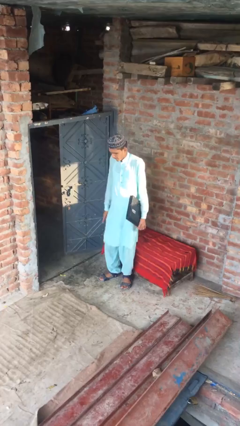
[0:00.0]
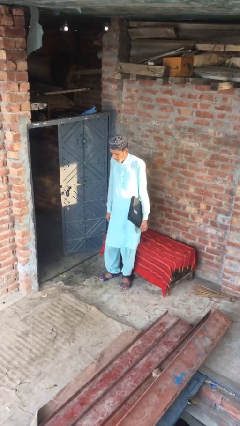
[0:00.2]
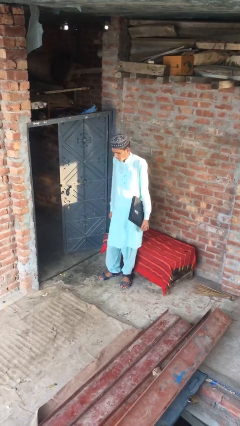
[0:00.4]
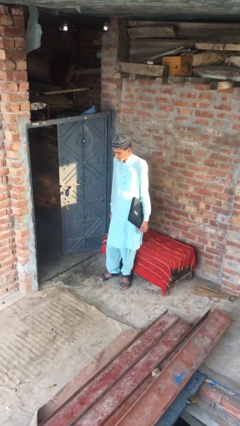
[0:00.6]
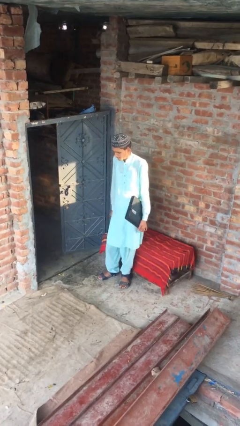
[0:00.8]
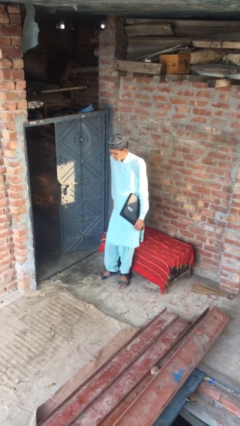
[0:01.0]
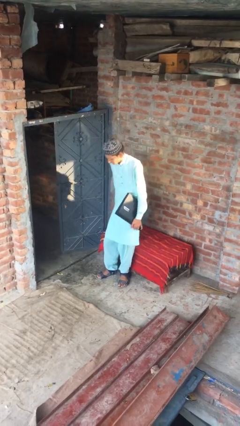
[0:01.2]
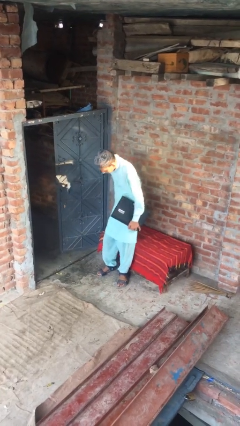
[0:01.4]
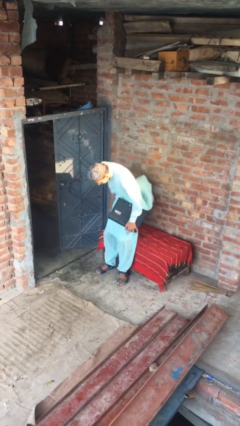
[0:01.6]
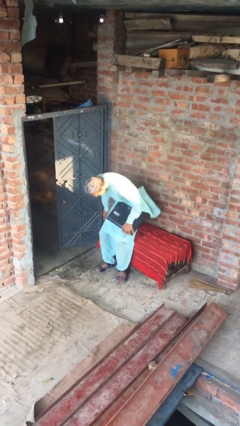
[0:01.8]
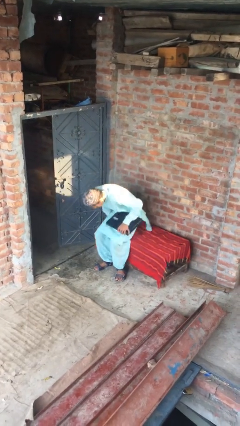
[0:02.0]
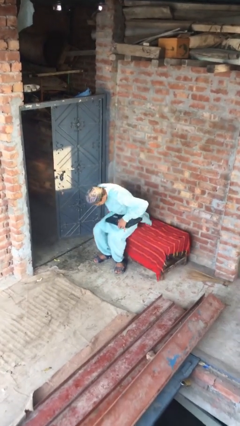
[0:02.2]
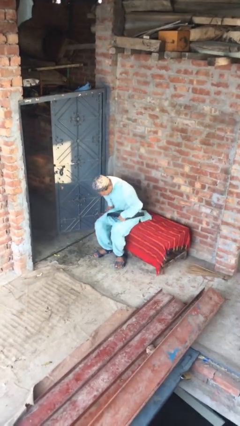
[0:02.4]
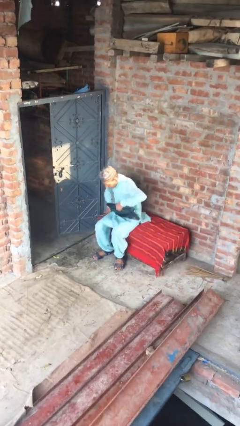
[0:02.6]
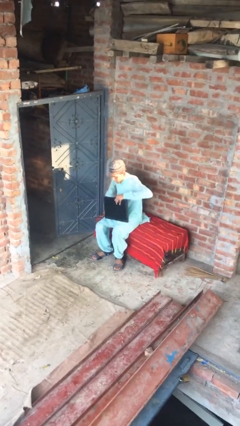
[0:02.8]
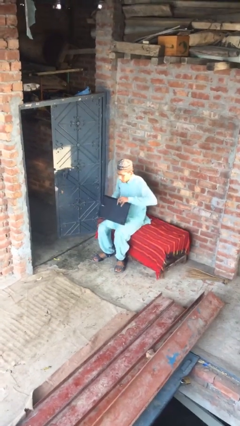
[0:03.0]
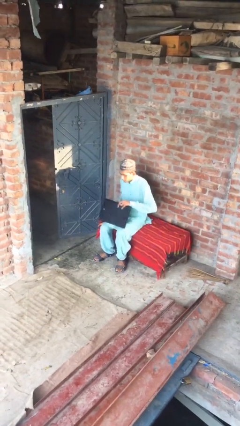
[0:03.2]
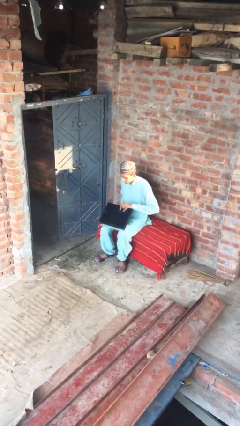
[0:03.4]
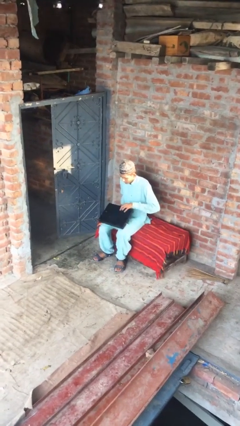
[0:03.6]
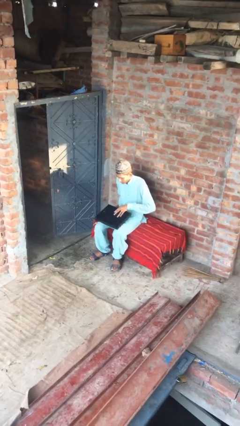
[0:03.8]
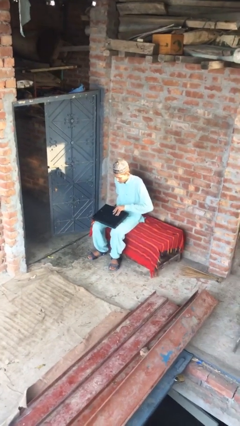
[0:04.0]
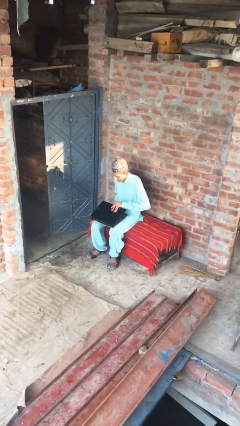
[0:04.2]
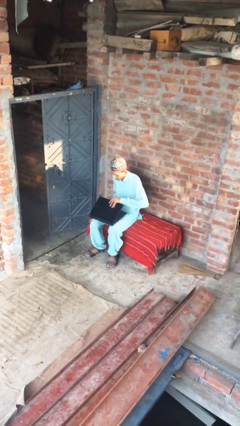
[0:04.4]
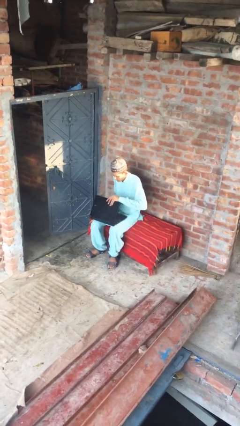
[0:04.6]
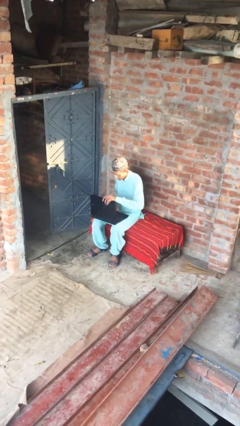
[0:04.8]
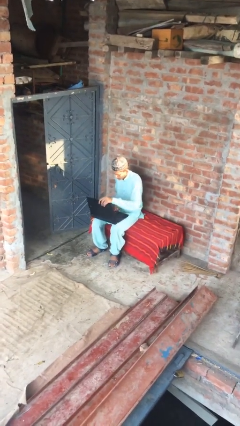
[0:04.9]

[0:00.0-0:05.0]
person sits down

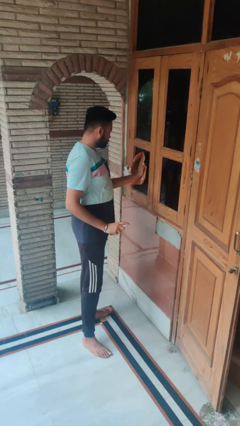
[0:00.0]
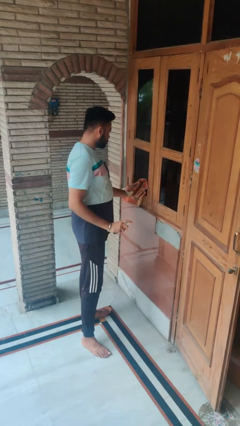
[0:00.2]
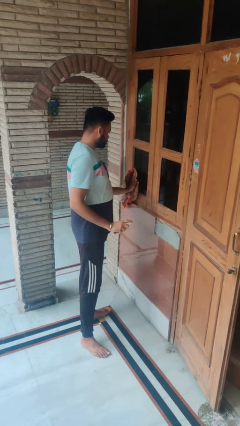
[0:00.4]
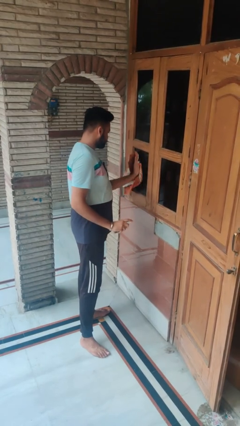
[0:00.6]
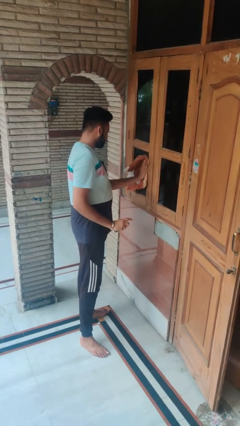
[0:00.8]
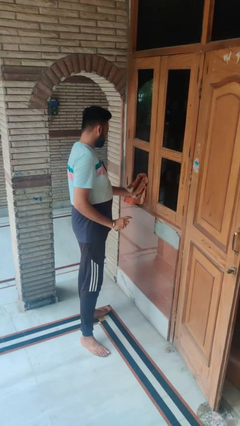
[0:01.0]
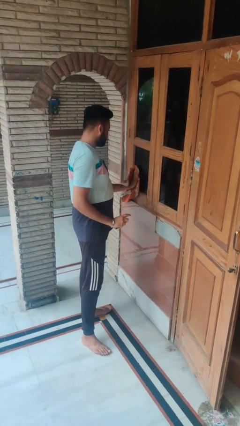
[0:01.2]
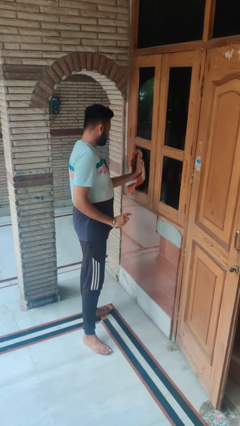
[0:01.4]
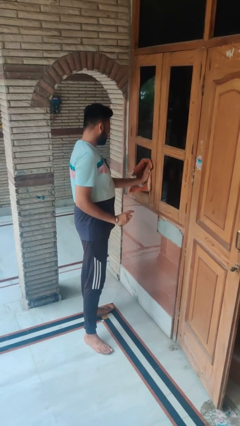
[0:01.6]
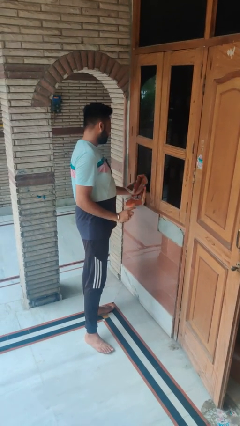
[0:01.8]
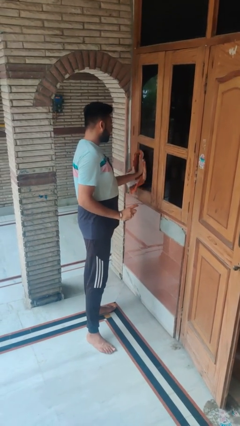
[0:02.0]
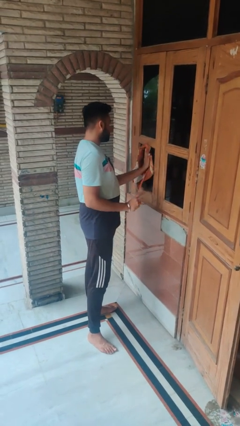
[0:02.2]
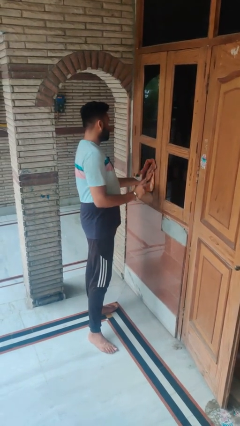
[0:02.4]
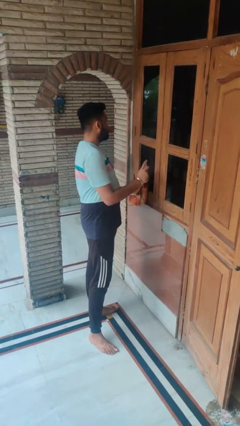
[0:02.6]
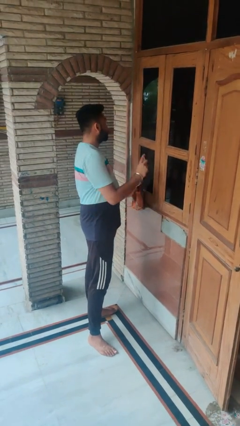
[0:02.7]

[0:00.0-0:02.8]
person washes window

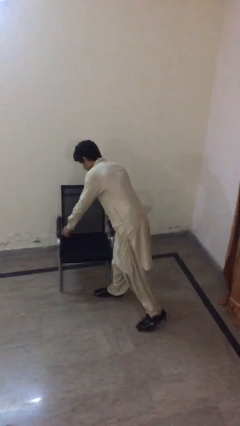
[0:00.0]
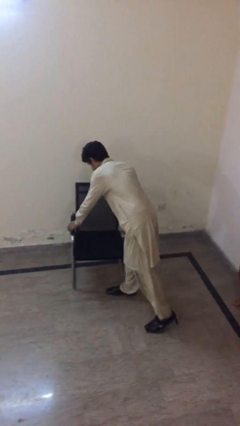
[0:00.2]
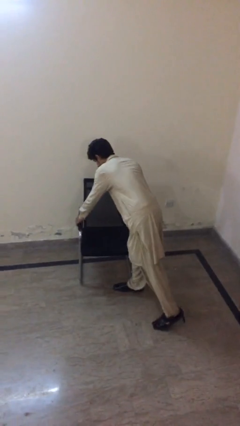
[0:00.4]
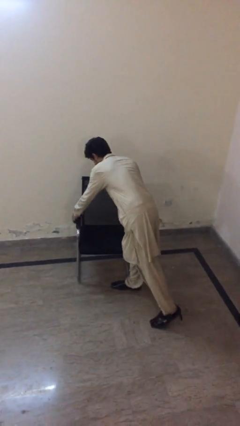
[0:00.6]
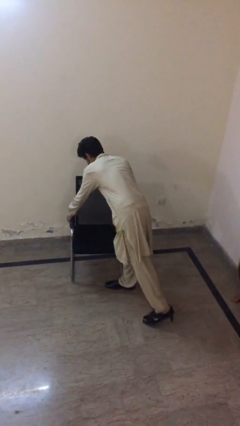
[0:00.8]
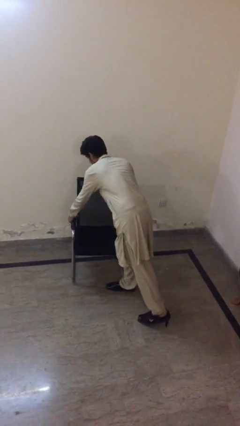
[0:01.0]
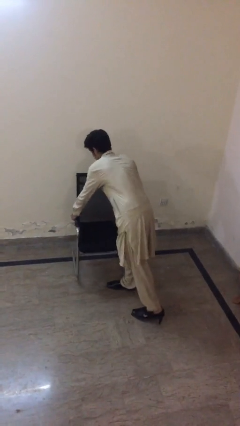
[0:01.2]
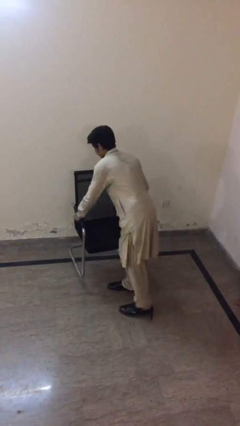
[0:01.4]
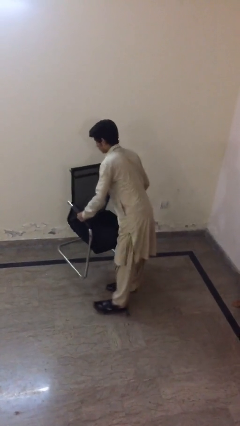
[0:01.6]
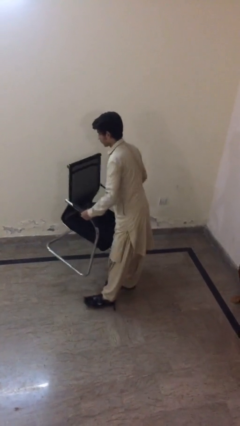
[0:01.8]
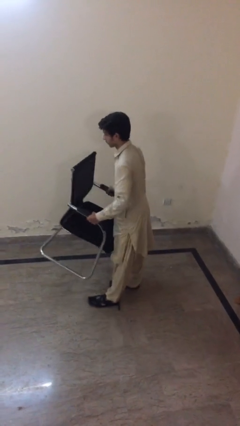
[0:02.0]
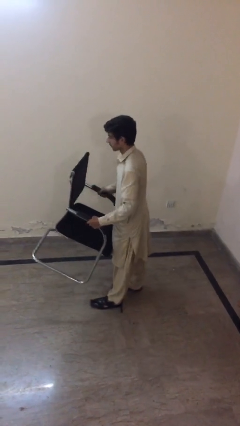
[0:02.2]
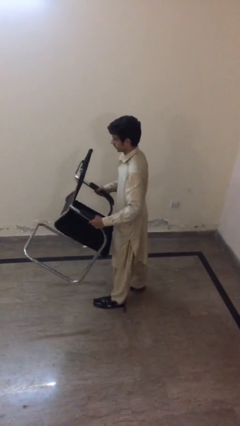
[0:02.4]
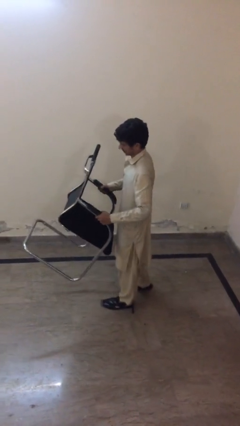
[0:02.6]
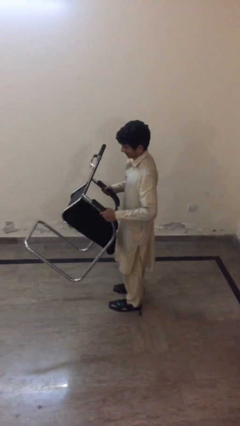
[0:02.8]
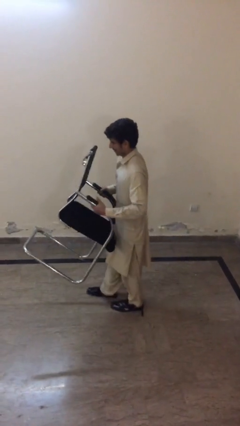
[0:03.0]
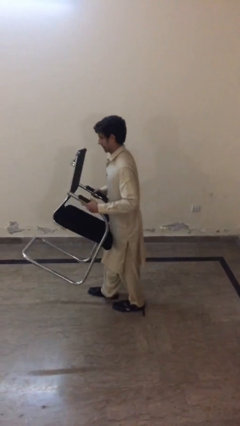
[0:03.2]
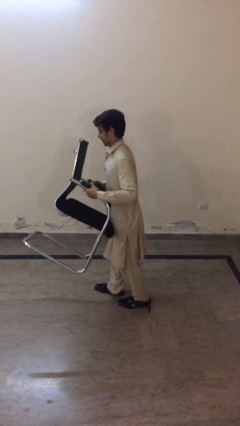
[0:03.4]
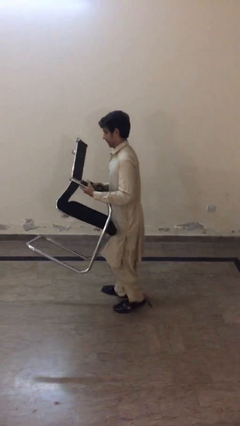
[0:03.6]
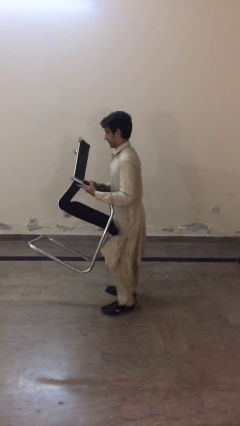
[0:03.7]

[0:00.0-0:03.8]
person picks up object from floor

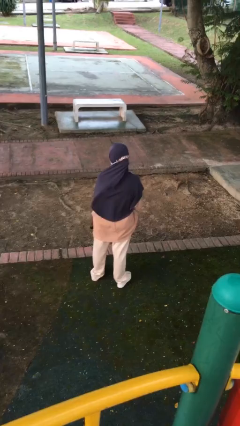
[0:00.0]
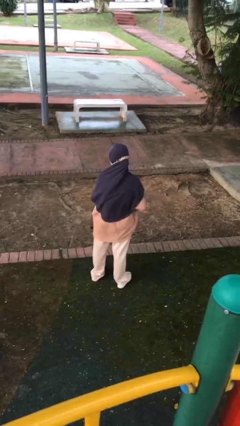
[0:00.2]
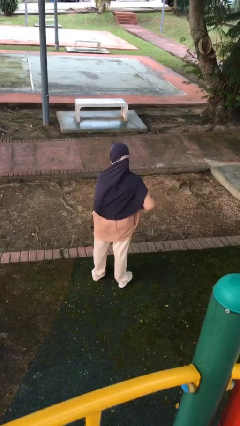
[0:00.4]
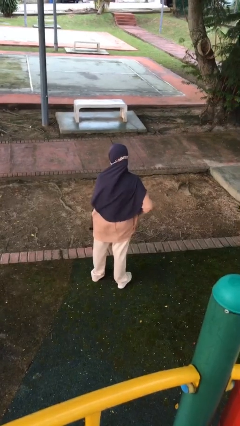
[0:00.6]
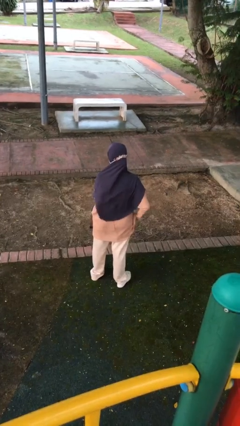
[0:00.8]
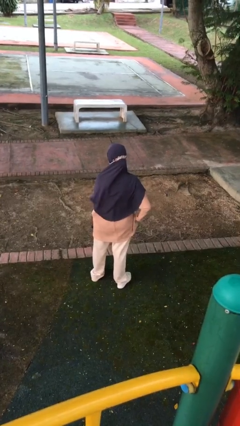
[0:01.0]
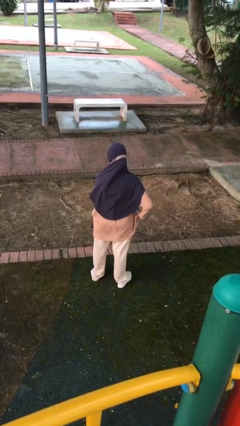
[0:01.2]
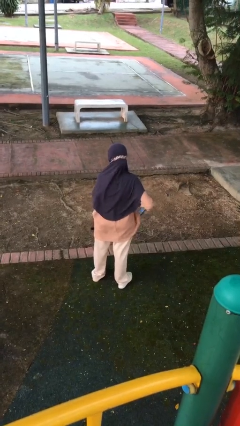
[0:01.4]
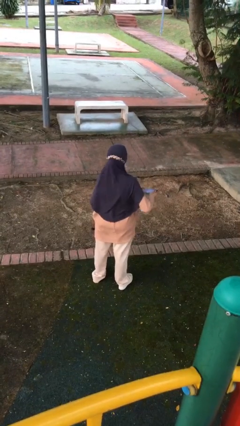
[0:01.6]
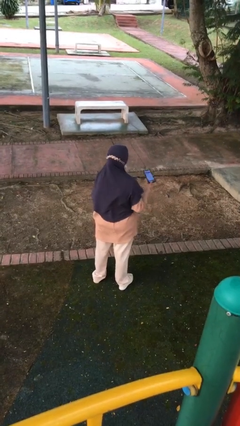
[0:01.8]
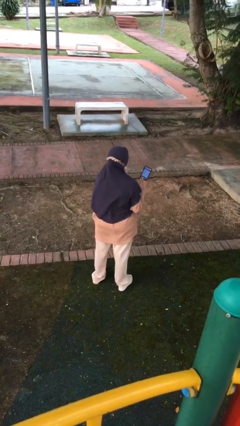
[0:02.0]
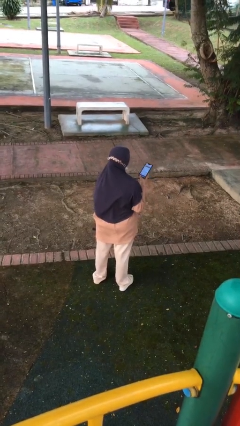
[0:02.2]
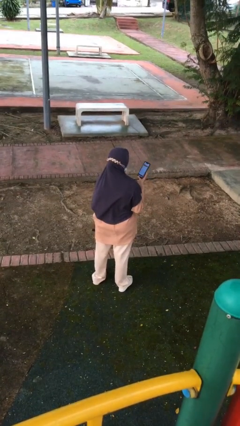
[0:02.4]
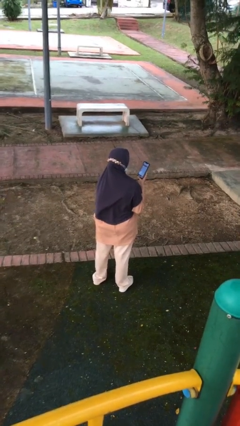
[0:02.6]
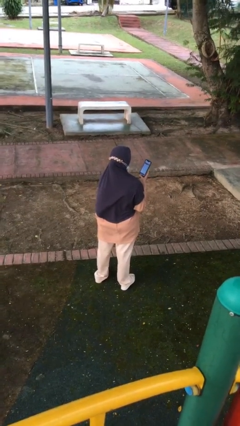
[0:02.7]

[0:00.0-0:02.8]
person takes phone from pocket

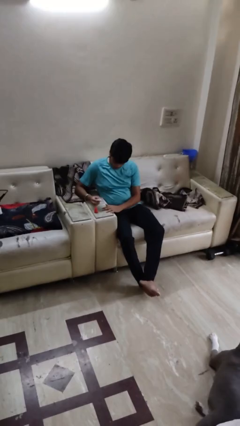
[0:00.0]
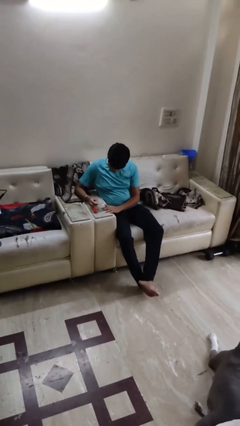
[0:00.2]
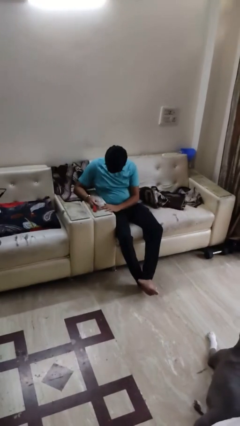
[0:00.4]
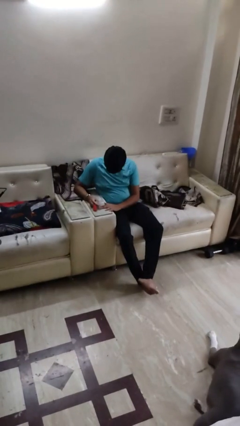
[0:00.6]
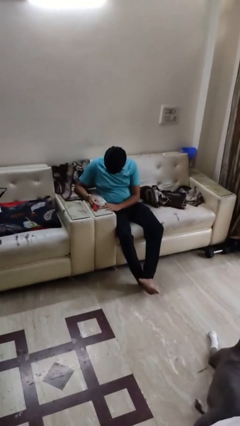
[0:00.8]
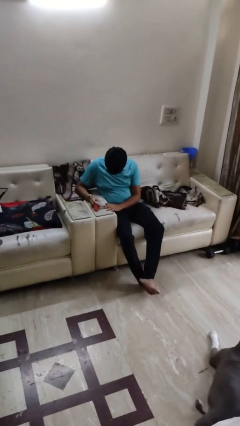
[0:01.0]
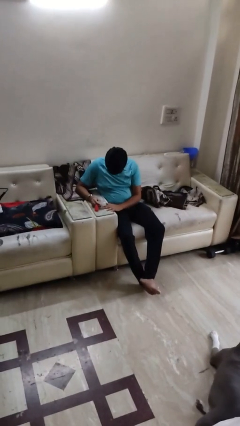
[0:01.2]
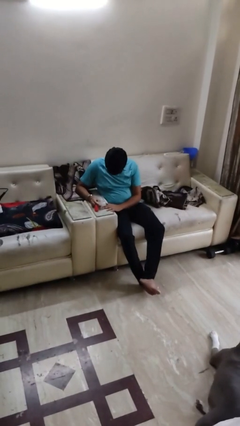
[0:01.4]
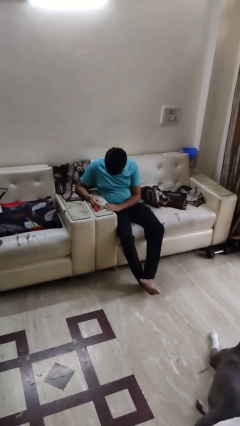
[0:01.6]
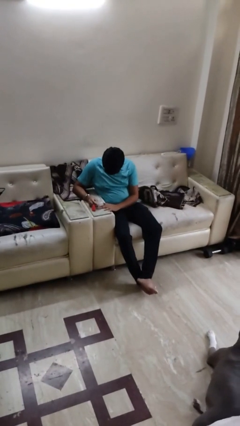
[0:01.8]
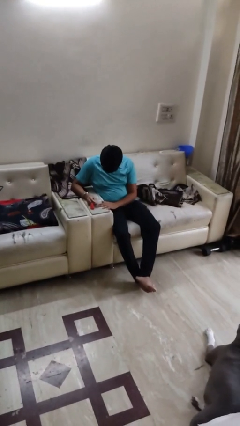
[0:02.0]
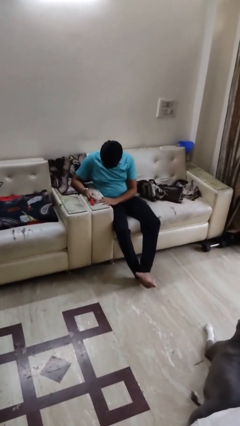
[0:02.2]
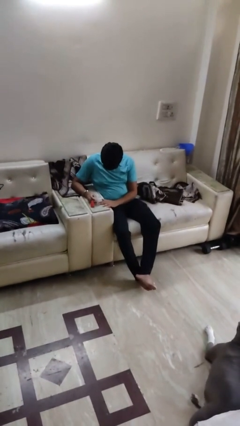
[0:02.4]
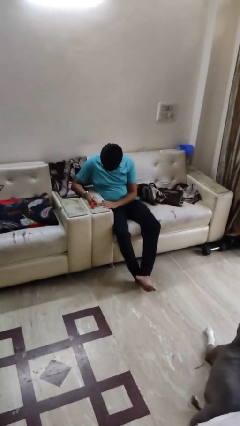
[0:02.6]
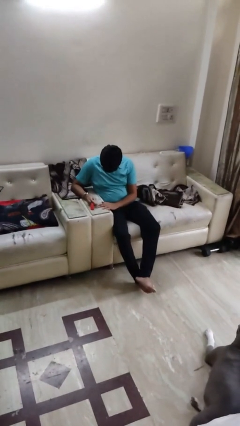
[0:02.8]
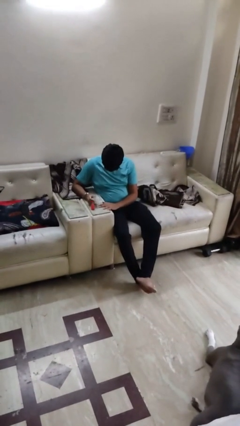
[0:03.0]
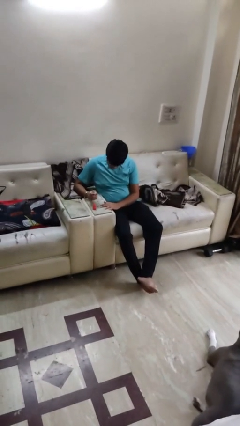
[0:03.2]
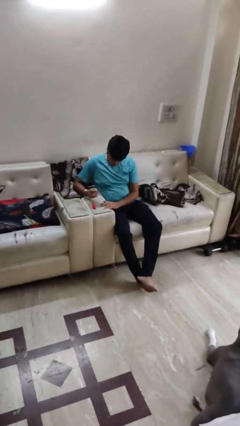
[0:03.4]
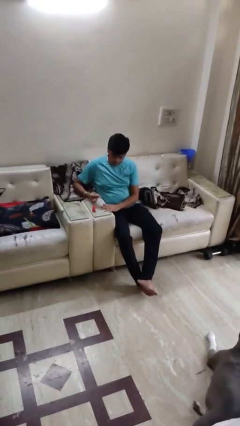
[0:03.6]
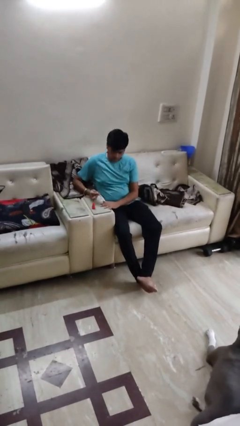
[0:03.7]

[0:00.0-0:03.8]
person paints fingernails
